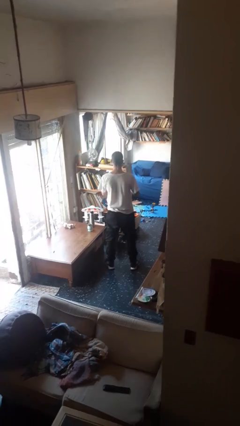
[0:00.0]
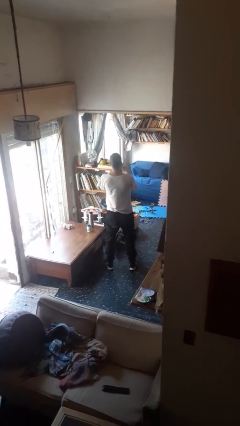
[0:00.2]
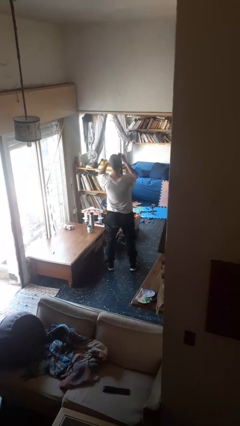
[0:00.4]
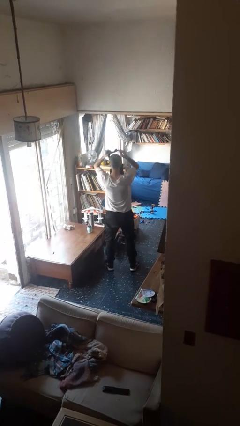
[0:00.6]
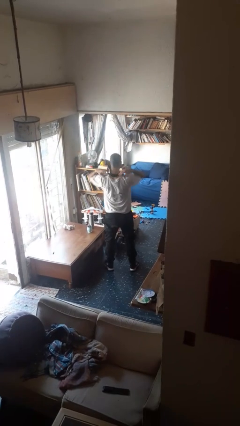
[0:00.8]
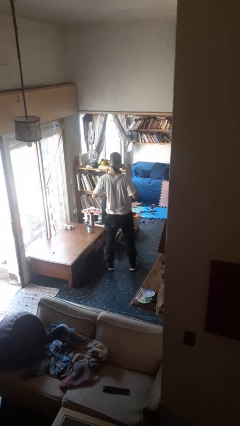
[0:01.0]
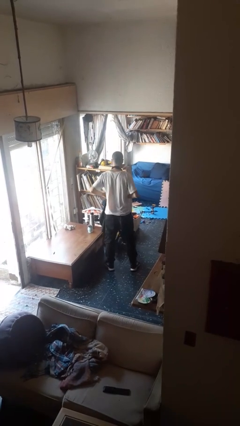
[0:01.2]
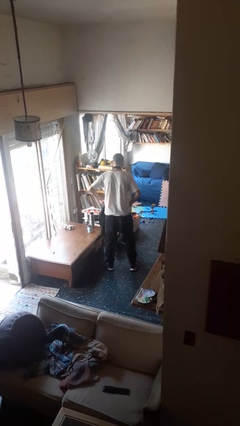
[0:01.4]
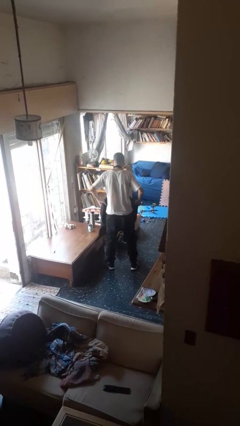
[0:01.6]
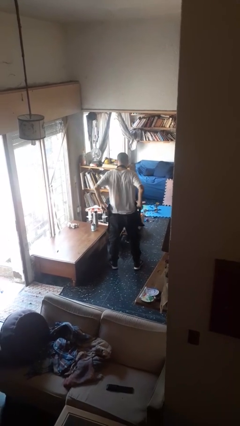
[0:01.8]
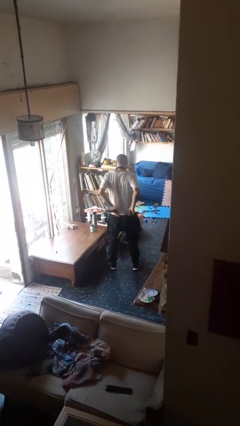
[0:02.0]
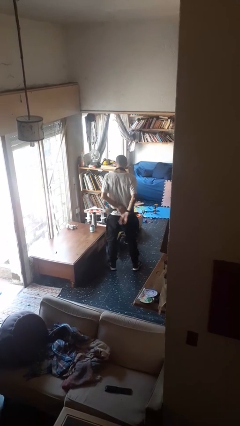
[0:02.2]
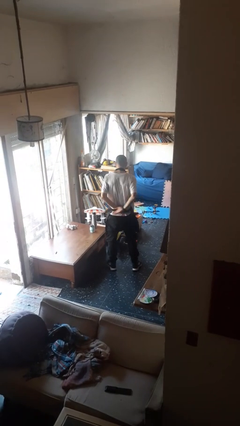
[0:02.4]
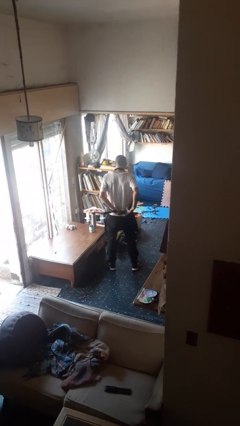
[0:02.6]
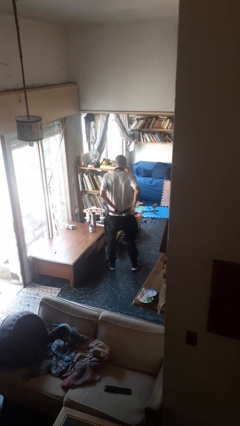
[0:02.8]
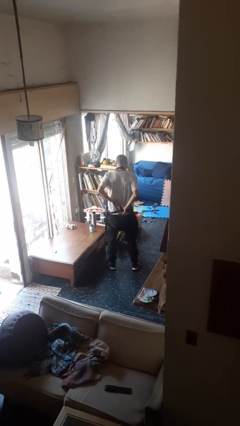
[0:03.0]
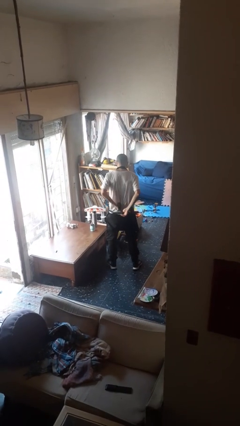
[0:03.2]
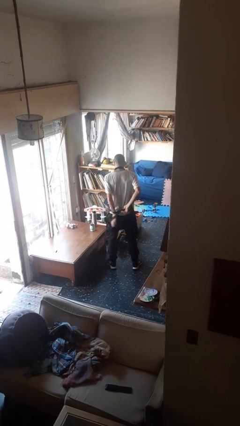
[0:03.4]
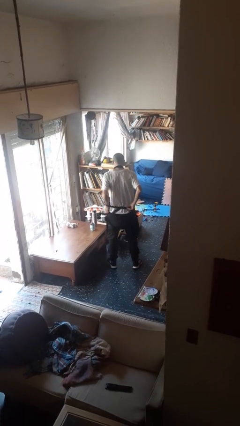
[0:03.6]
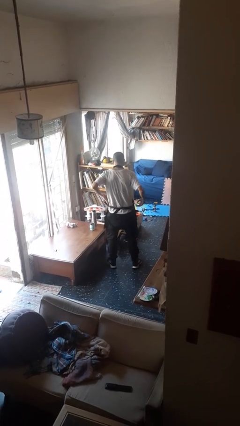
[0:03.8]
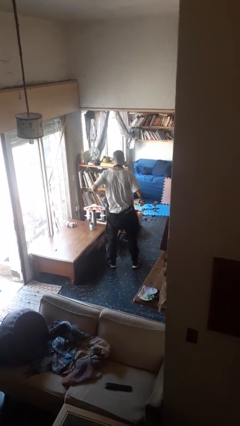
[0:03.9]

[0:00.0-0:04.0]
person puts on apron

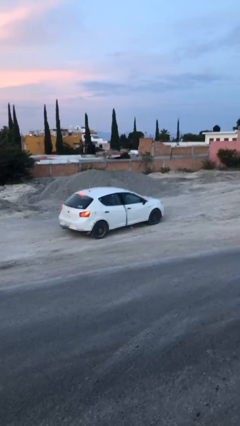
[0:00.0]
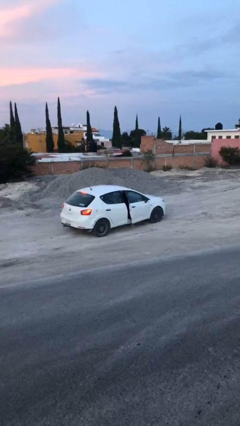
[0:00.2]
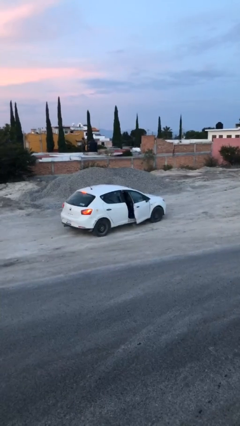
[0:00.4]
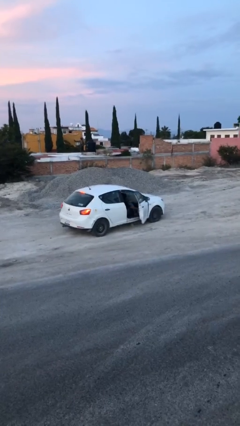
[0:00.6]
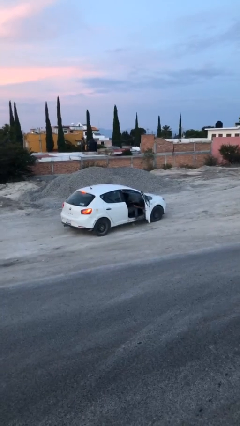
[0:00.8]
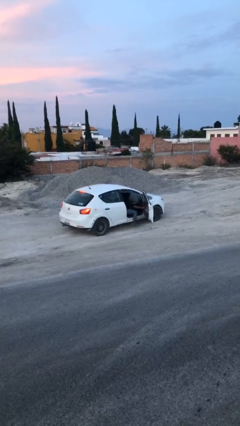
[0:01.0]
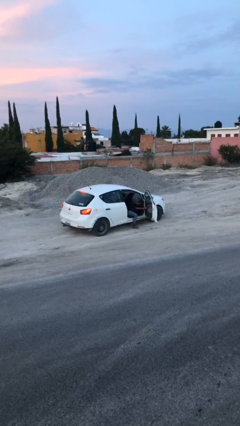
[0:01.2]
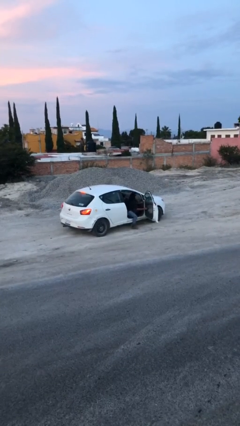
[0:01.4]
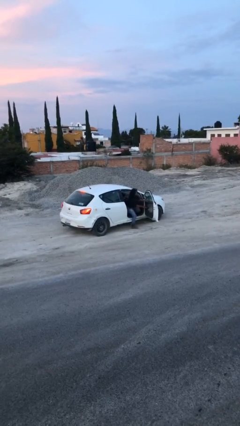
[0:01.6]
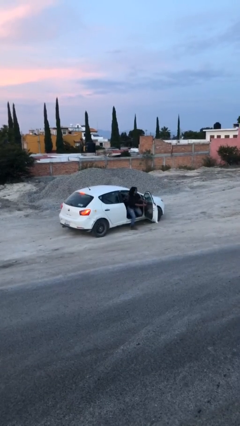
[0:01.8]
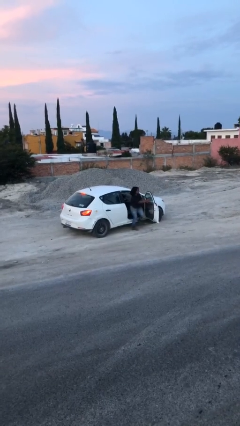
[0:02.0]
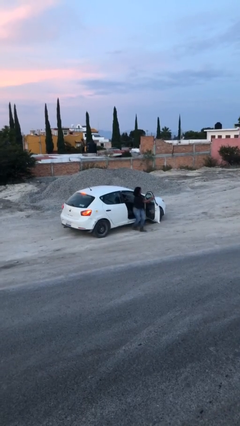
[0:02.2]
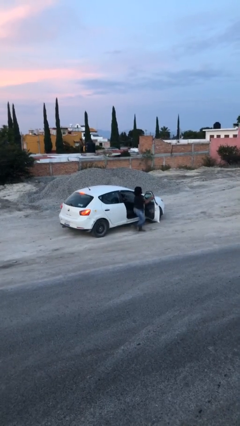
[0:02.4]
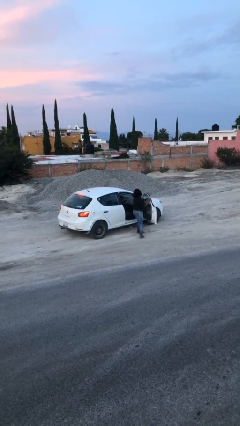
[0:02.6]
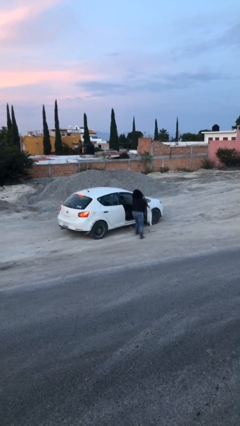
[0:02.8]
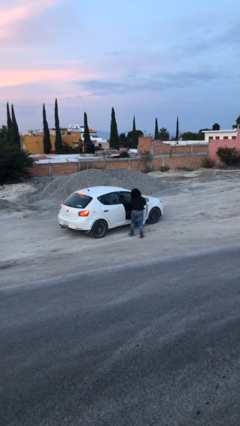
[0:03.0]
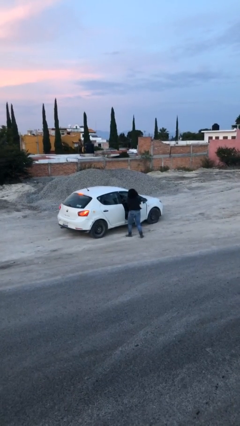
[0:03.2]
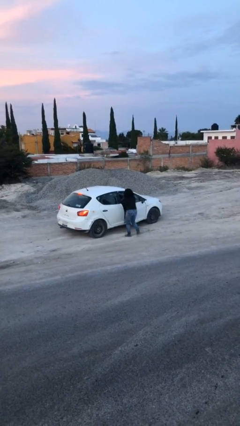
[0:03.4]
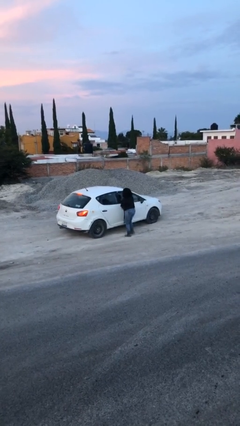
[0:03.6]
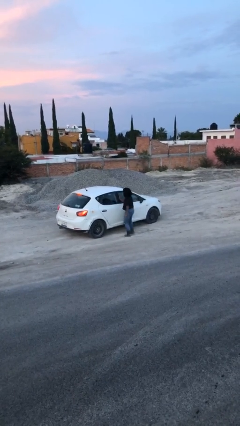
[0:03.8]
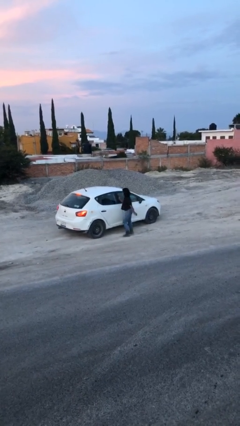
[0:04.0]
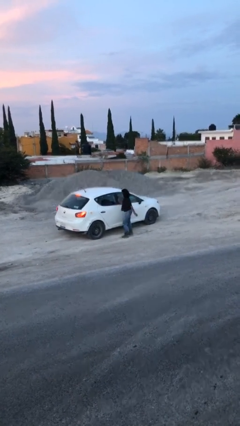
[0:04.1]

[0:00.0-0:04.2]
car drops off person

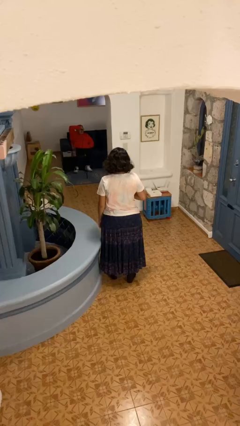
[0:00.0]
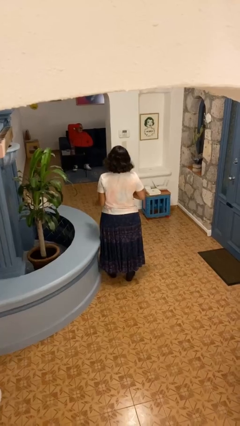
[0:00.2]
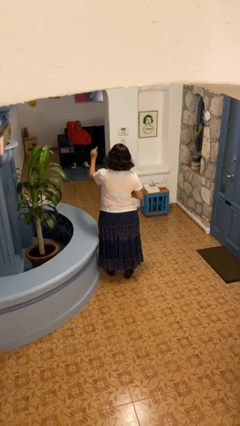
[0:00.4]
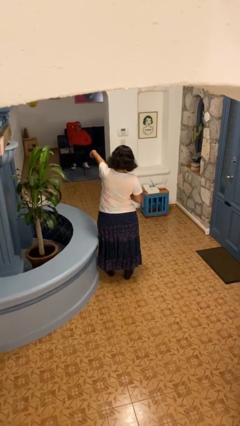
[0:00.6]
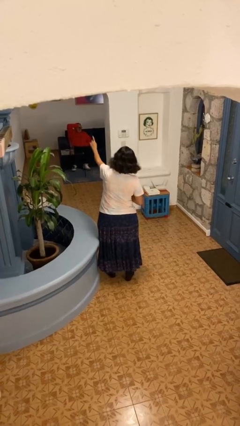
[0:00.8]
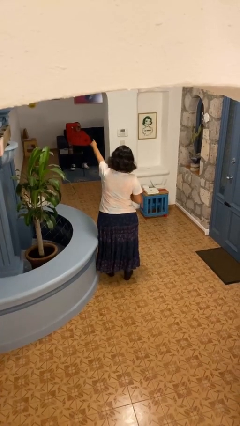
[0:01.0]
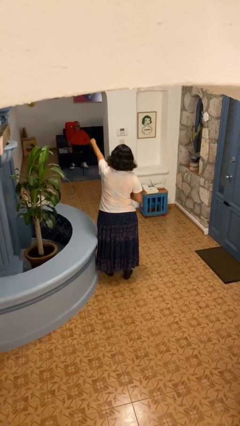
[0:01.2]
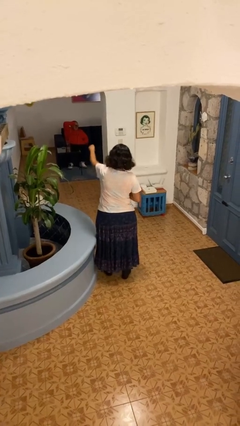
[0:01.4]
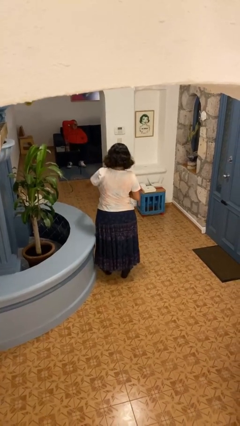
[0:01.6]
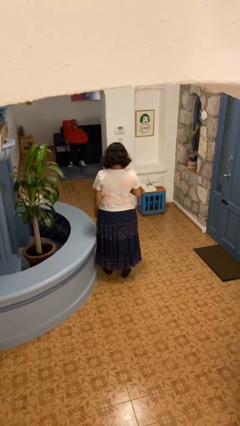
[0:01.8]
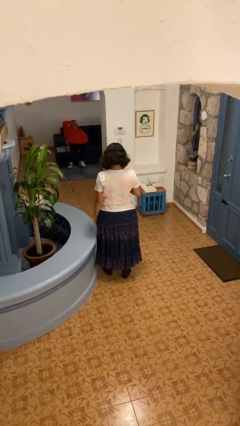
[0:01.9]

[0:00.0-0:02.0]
person points at person

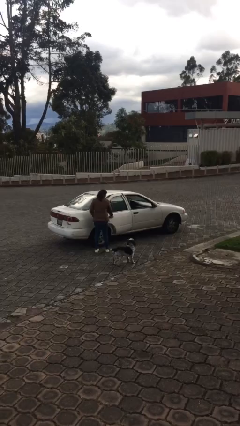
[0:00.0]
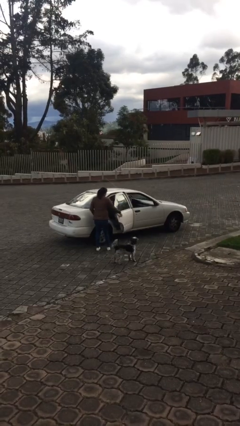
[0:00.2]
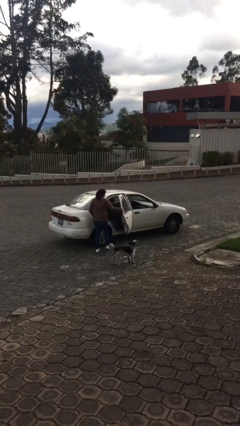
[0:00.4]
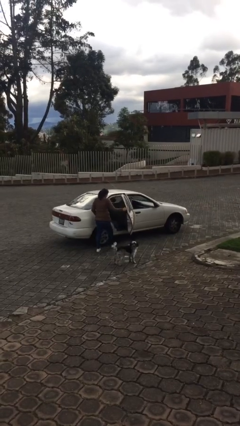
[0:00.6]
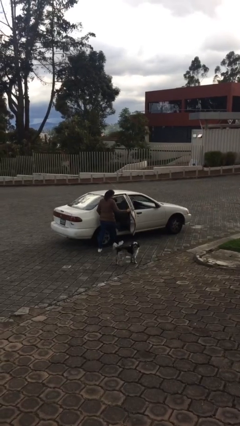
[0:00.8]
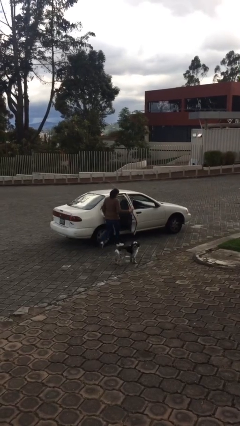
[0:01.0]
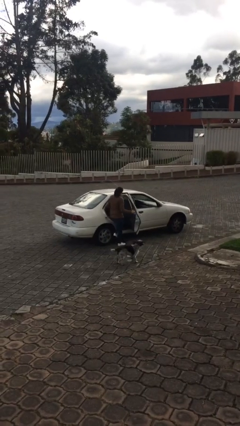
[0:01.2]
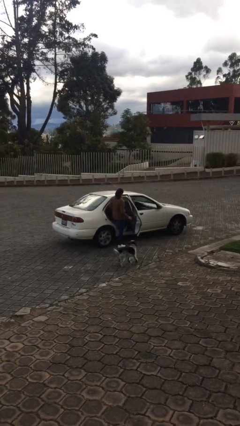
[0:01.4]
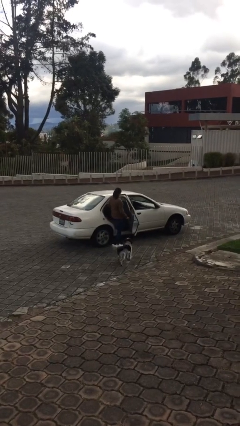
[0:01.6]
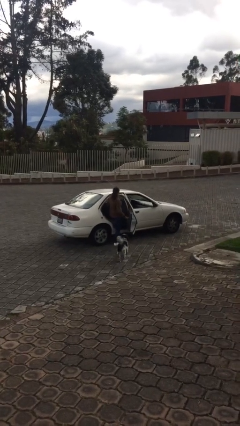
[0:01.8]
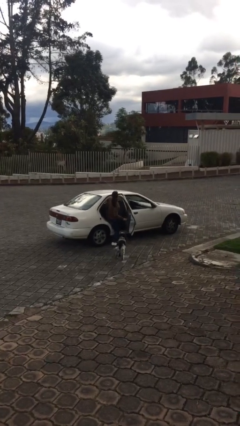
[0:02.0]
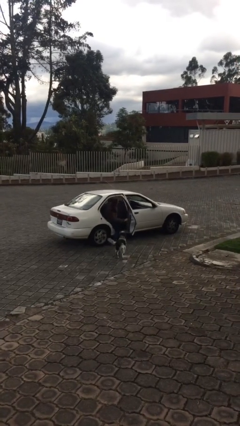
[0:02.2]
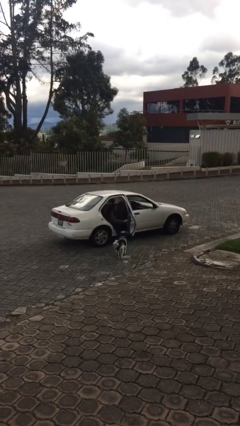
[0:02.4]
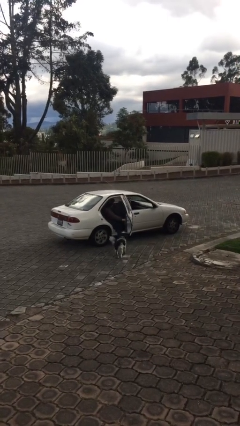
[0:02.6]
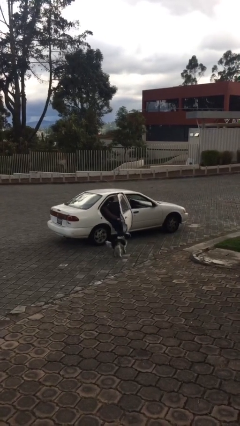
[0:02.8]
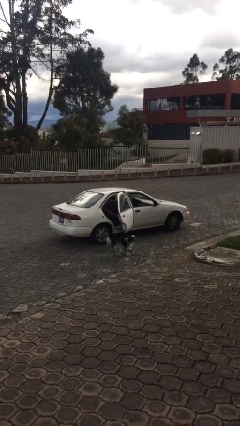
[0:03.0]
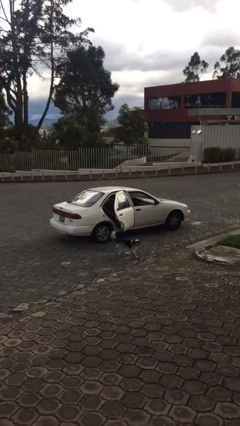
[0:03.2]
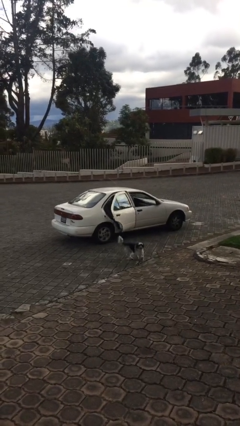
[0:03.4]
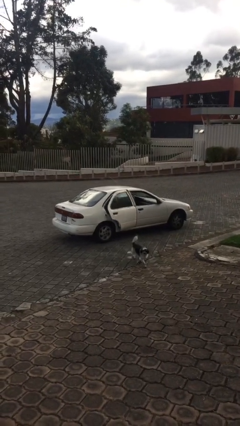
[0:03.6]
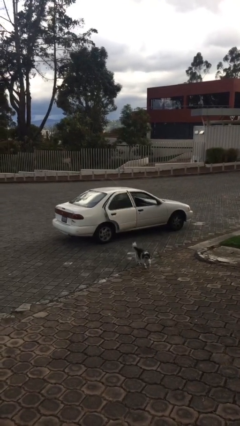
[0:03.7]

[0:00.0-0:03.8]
car picks up person

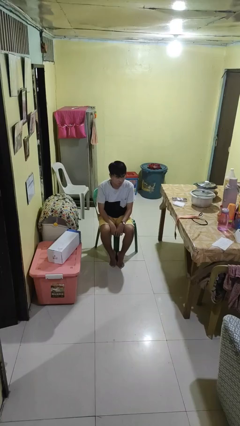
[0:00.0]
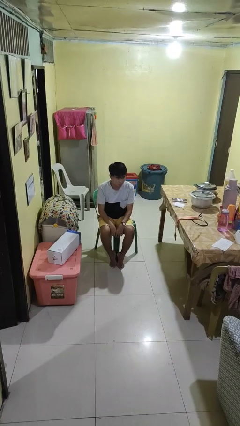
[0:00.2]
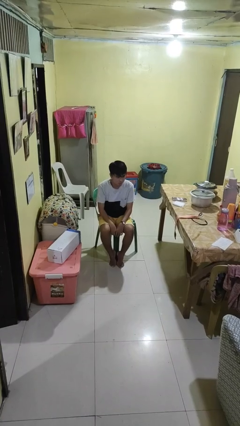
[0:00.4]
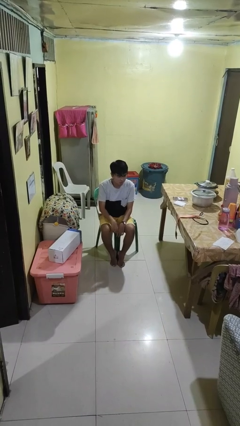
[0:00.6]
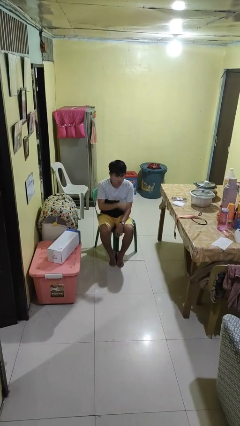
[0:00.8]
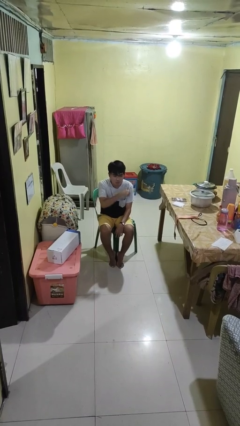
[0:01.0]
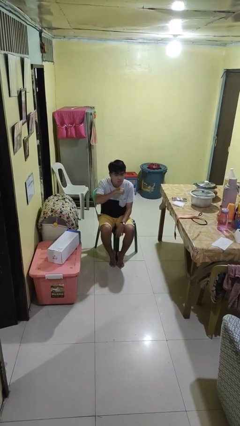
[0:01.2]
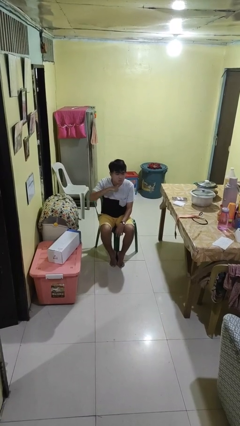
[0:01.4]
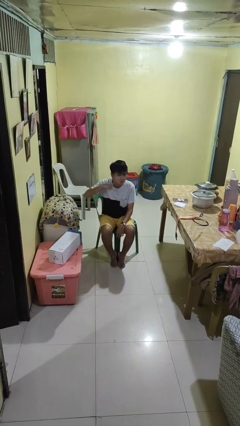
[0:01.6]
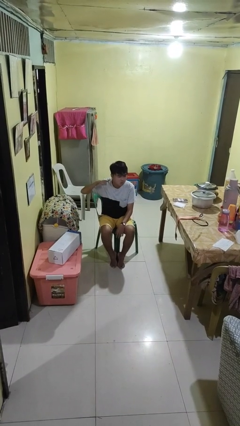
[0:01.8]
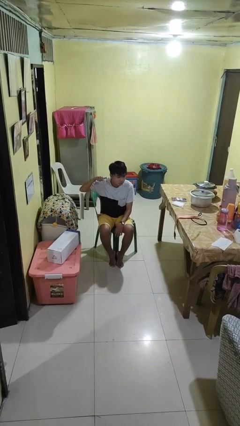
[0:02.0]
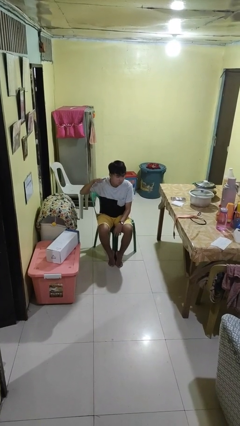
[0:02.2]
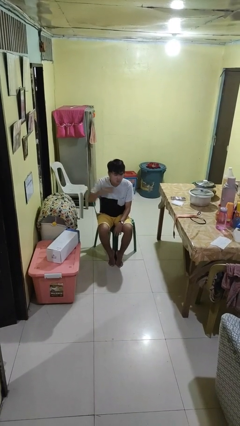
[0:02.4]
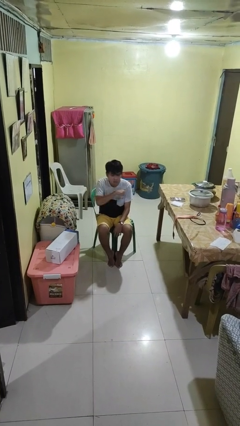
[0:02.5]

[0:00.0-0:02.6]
person gestures cut

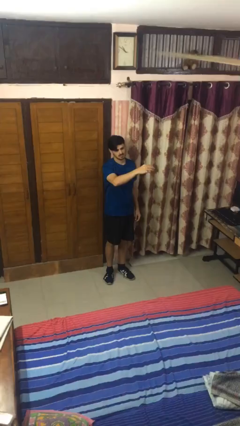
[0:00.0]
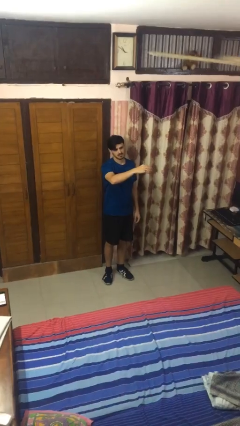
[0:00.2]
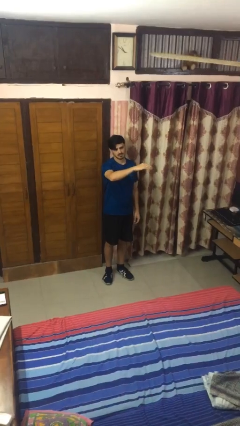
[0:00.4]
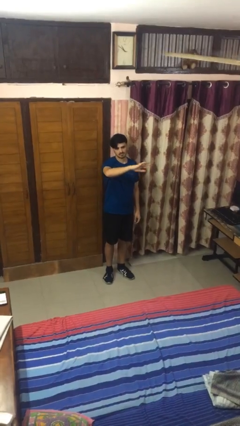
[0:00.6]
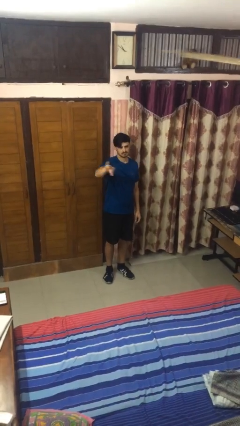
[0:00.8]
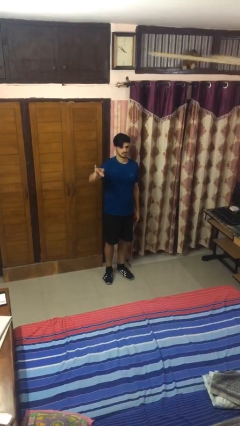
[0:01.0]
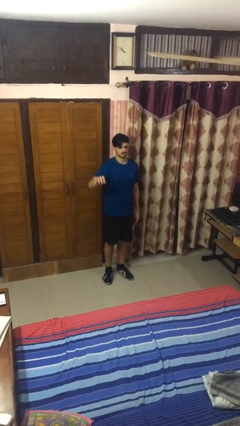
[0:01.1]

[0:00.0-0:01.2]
person gestures swipe right
